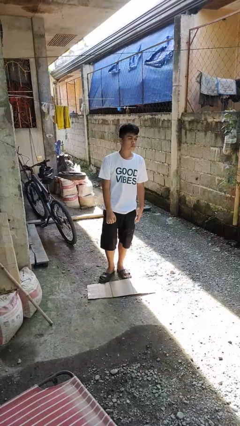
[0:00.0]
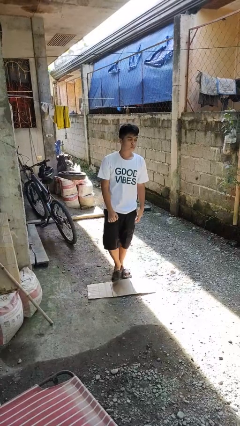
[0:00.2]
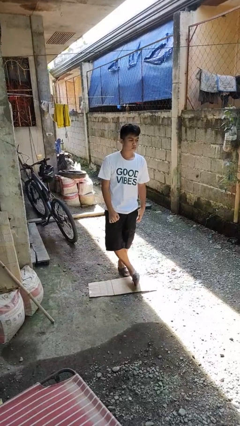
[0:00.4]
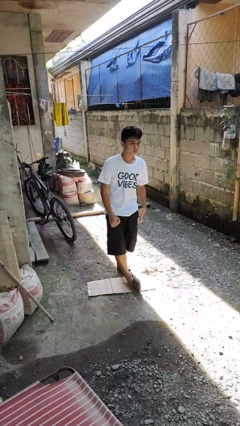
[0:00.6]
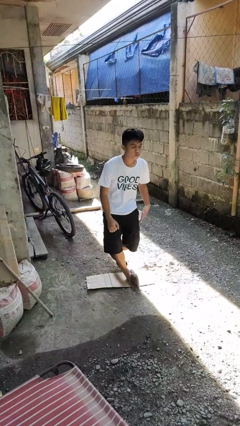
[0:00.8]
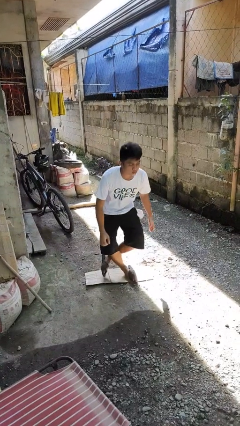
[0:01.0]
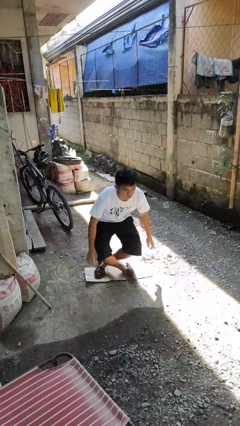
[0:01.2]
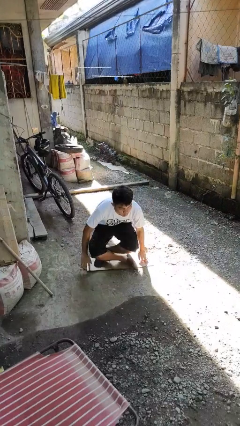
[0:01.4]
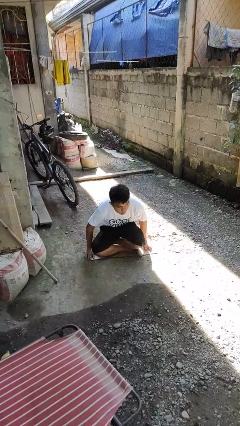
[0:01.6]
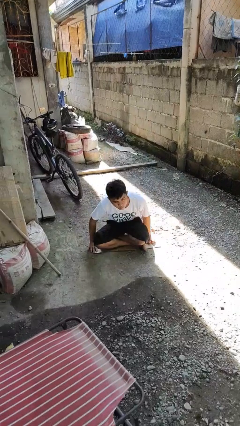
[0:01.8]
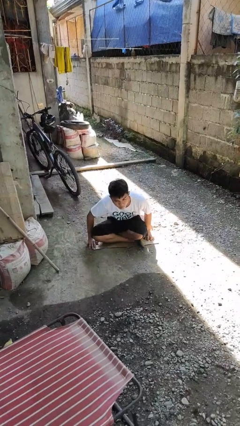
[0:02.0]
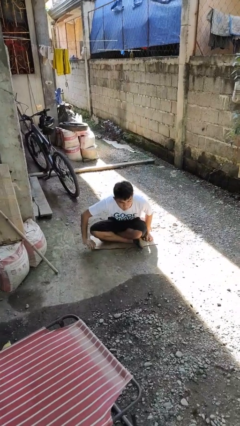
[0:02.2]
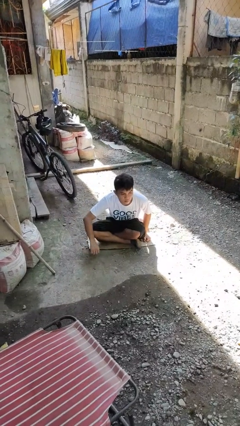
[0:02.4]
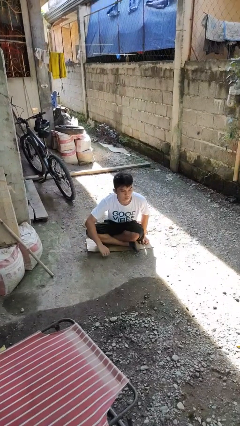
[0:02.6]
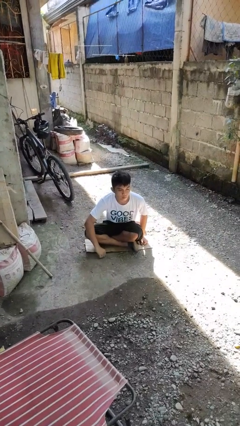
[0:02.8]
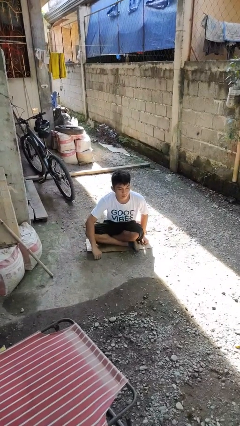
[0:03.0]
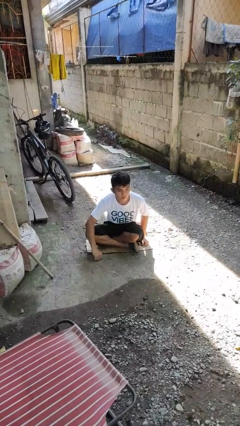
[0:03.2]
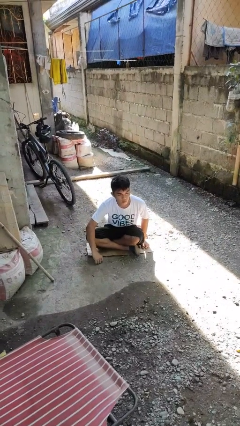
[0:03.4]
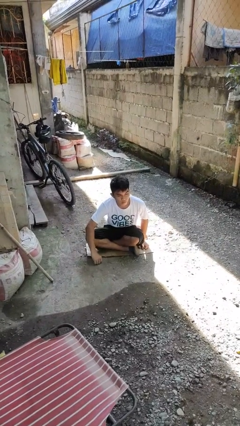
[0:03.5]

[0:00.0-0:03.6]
person sits crisscross

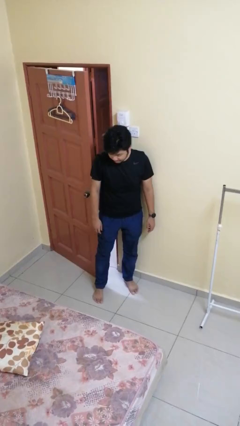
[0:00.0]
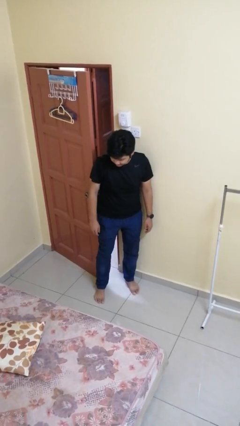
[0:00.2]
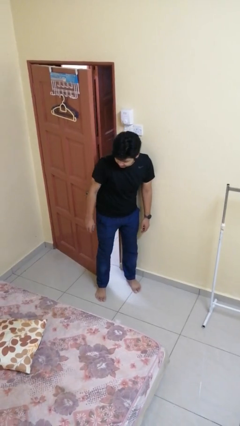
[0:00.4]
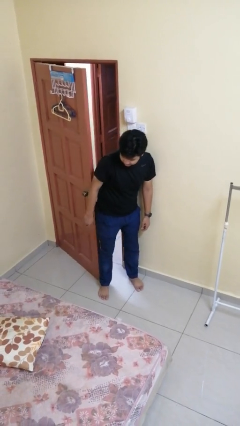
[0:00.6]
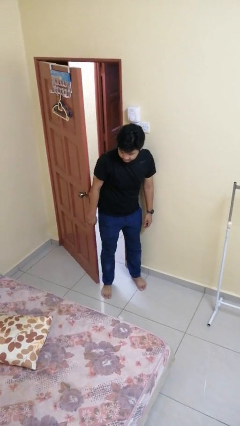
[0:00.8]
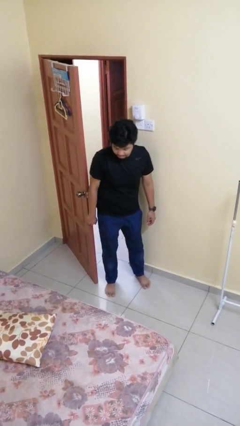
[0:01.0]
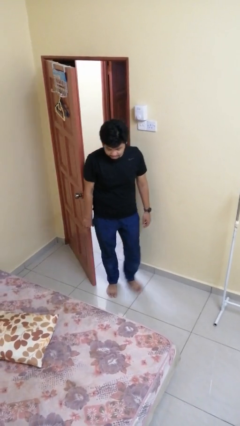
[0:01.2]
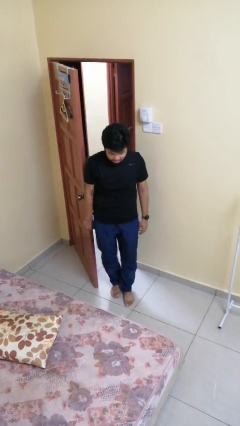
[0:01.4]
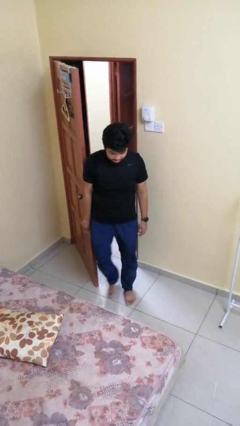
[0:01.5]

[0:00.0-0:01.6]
person opens facility door

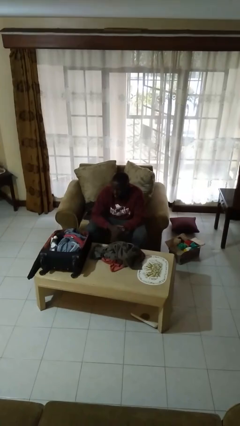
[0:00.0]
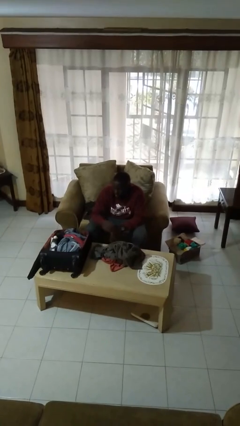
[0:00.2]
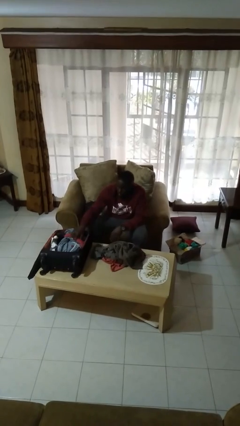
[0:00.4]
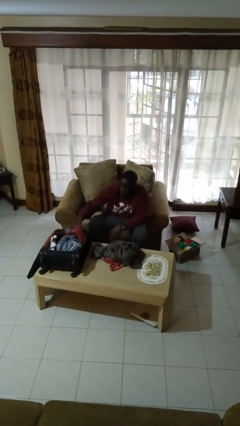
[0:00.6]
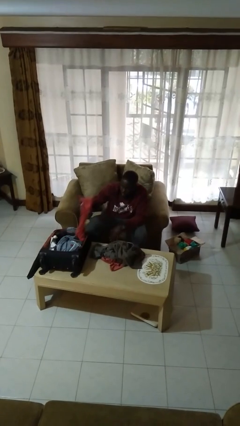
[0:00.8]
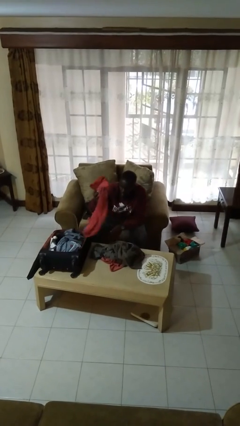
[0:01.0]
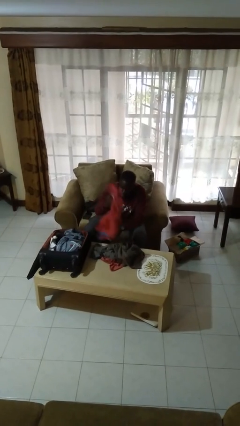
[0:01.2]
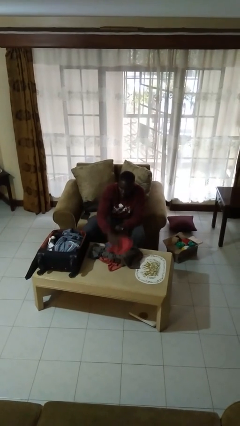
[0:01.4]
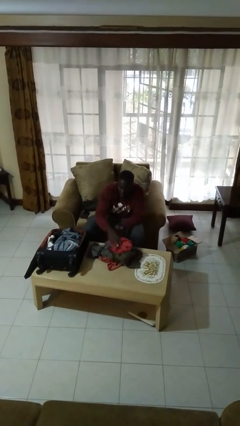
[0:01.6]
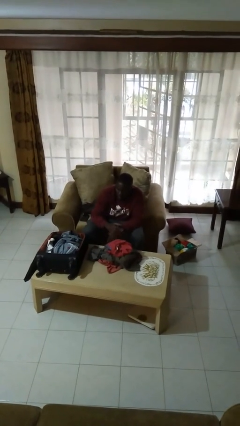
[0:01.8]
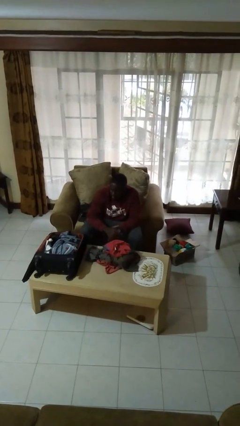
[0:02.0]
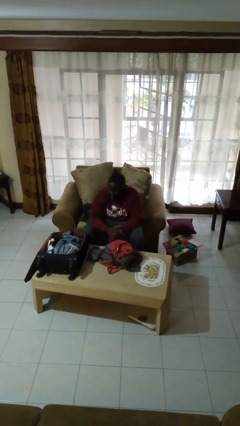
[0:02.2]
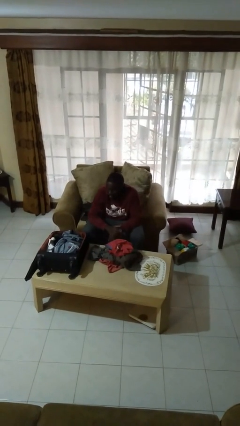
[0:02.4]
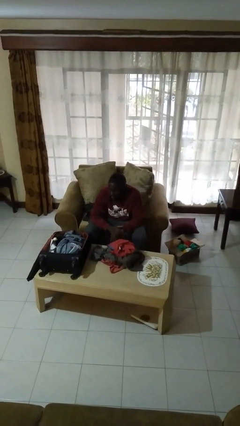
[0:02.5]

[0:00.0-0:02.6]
person unloads clothes from suitcase

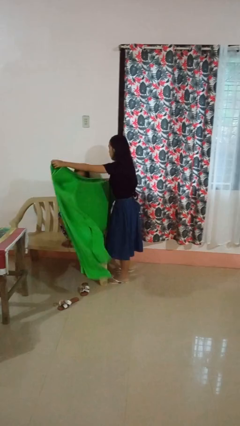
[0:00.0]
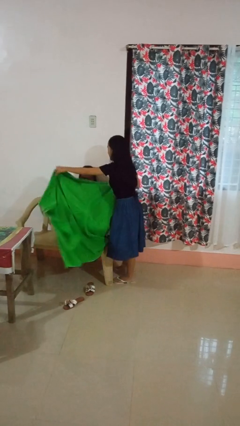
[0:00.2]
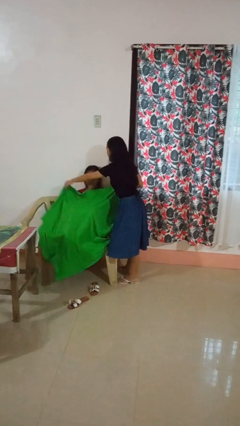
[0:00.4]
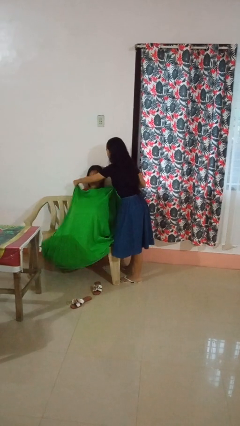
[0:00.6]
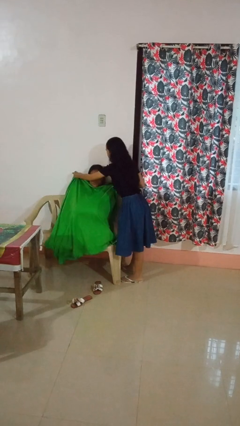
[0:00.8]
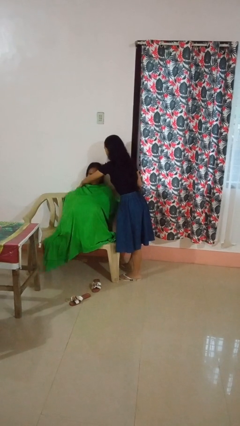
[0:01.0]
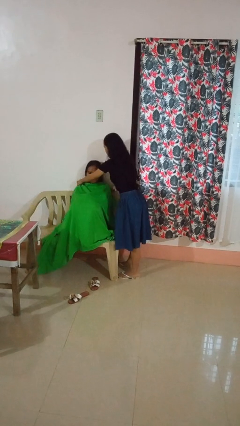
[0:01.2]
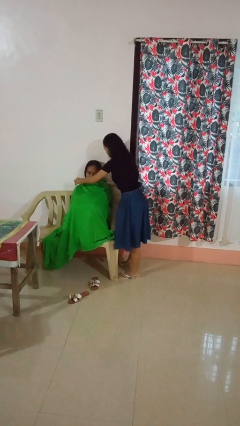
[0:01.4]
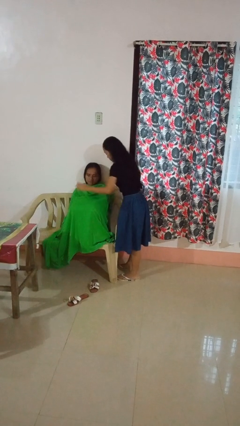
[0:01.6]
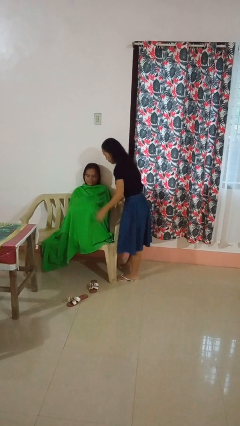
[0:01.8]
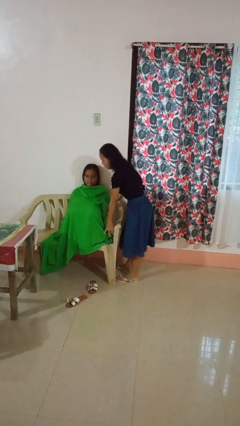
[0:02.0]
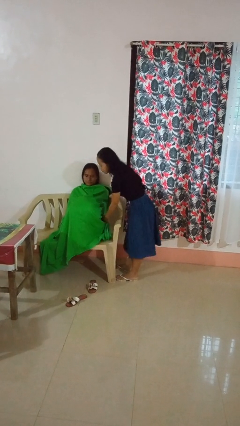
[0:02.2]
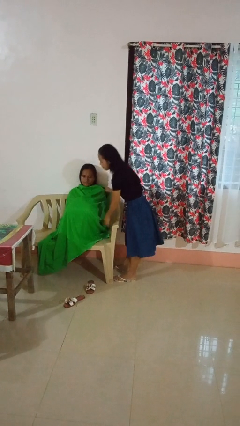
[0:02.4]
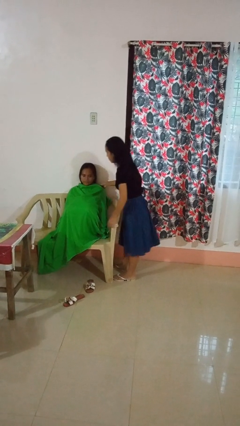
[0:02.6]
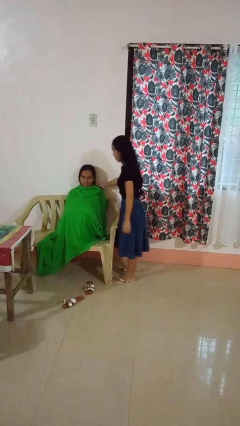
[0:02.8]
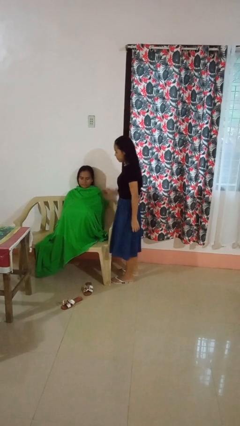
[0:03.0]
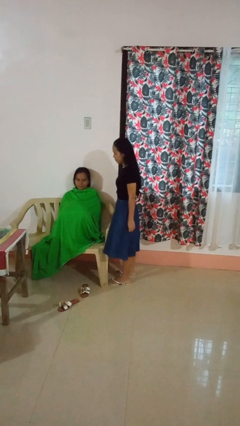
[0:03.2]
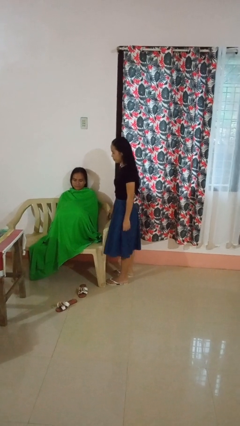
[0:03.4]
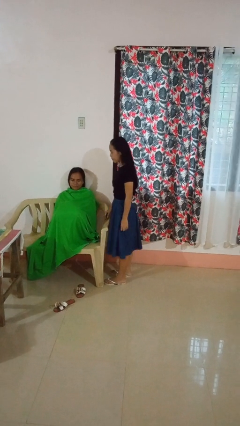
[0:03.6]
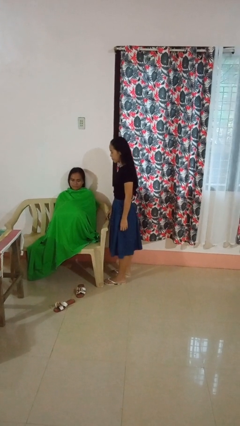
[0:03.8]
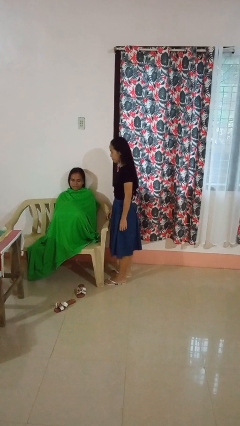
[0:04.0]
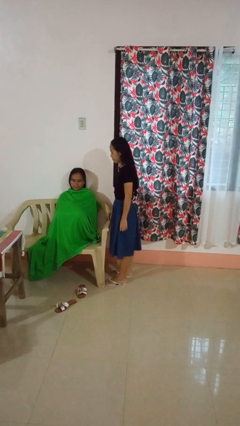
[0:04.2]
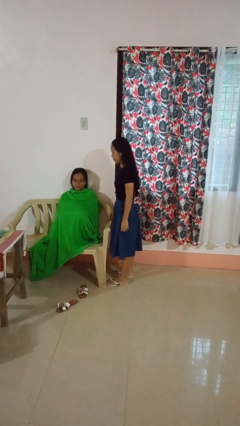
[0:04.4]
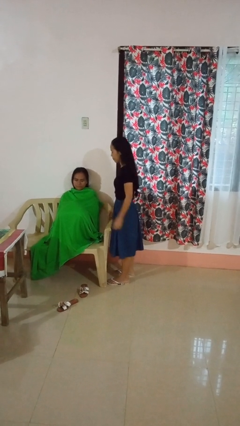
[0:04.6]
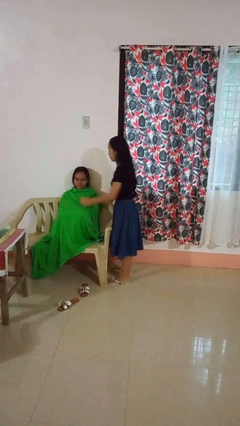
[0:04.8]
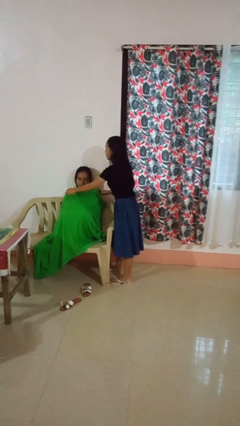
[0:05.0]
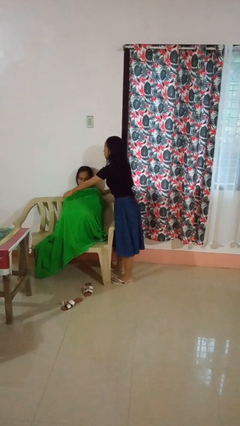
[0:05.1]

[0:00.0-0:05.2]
person covers friend with blanket

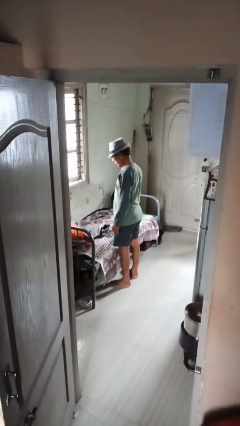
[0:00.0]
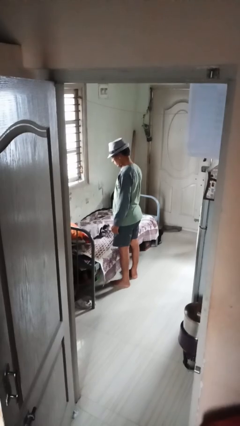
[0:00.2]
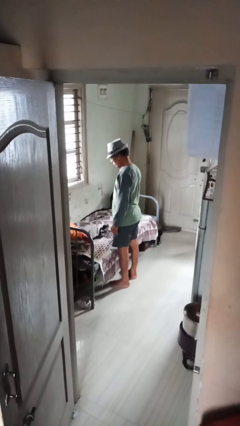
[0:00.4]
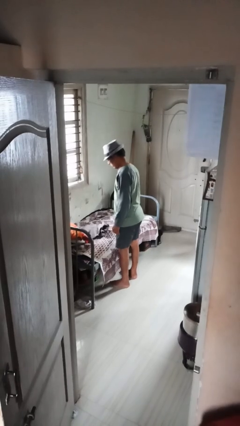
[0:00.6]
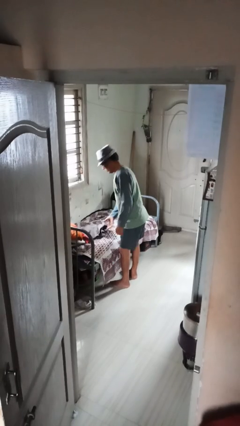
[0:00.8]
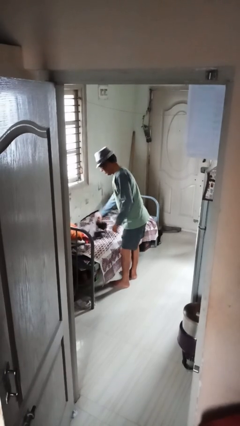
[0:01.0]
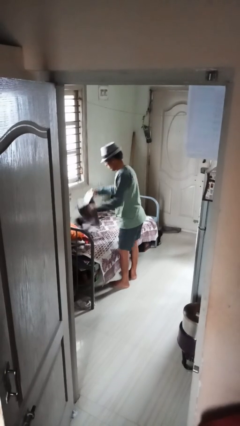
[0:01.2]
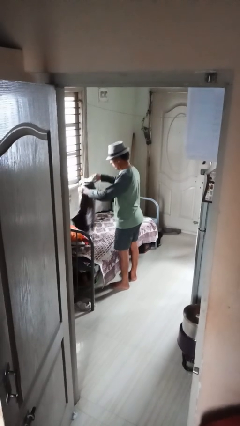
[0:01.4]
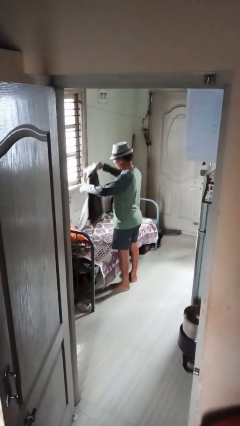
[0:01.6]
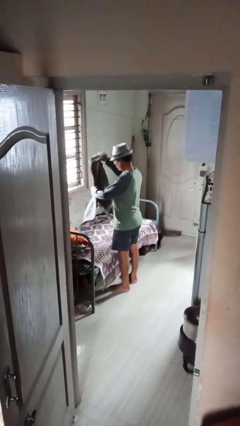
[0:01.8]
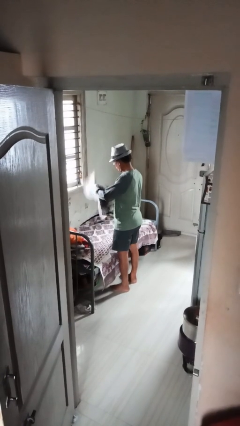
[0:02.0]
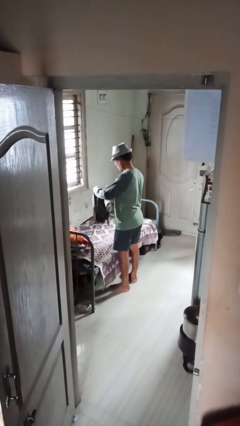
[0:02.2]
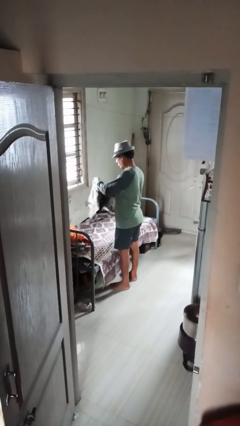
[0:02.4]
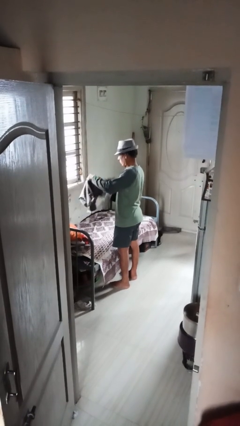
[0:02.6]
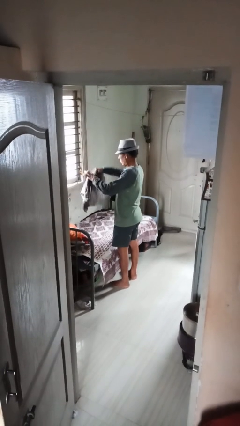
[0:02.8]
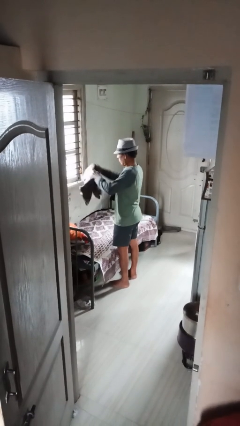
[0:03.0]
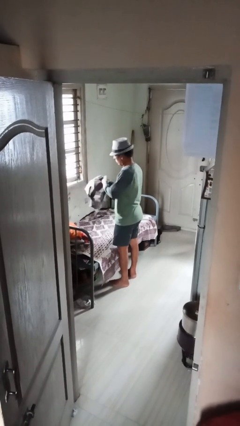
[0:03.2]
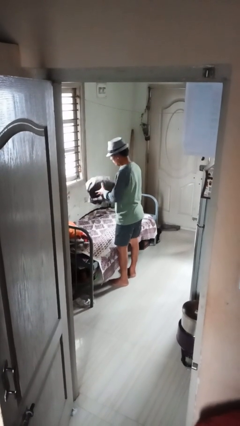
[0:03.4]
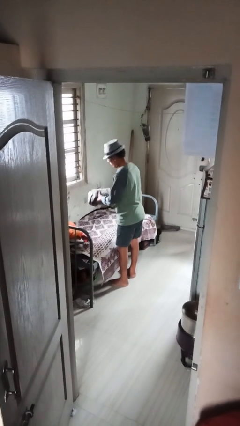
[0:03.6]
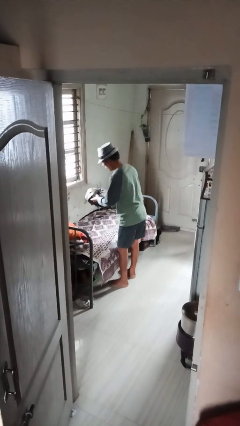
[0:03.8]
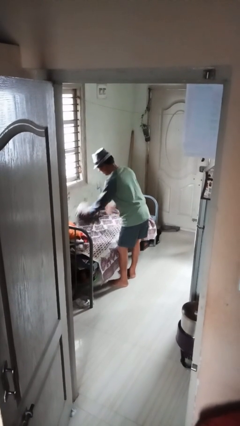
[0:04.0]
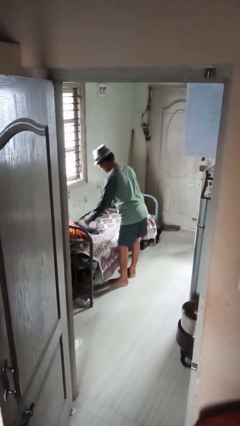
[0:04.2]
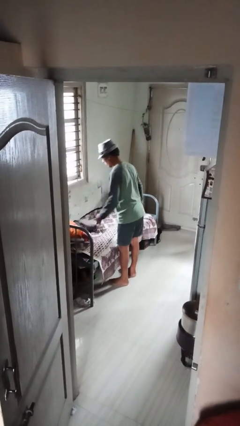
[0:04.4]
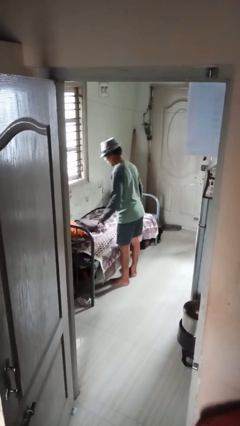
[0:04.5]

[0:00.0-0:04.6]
person folds pants

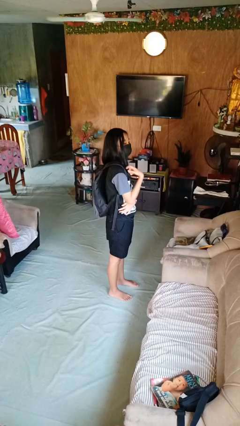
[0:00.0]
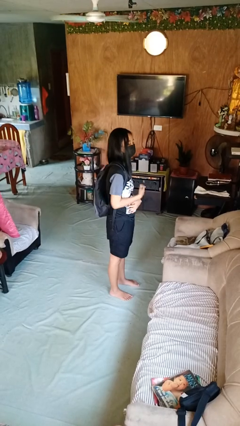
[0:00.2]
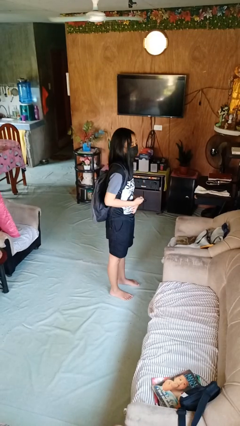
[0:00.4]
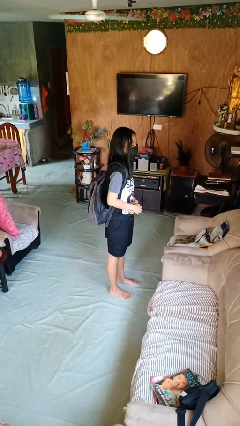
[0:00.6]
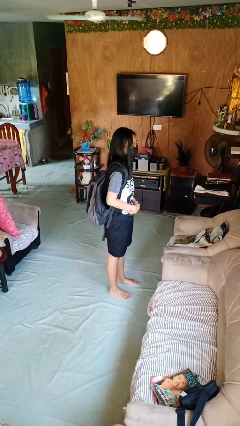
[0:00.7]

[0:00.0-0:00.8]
person puts on backpack
